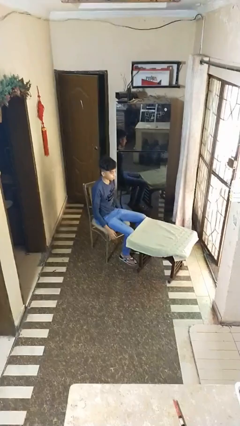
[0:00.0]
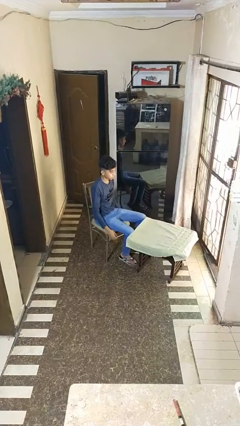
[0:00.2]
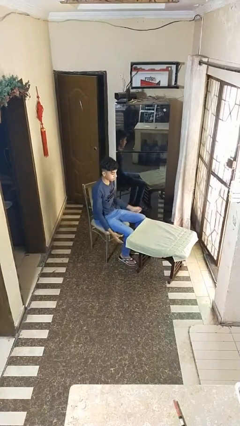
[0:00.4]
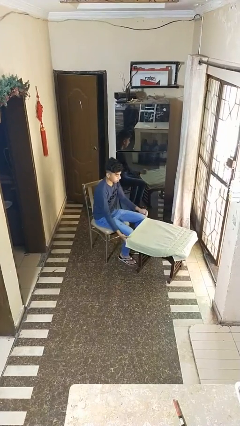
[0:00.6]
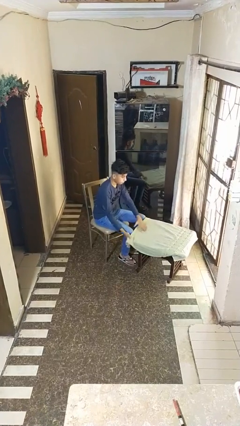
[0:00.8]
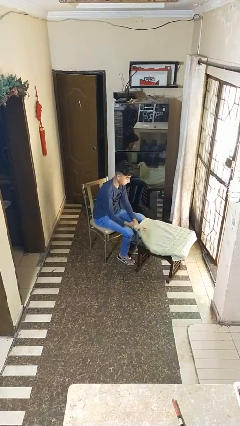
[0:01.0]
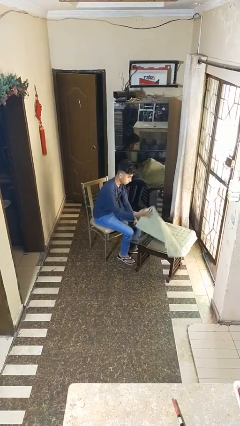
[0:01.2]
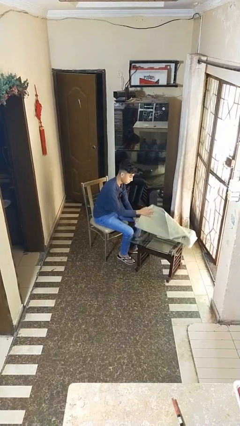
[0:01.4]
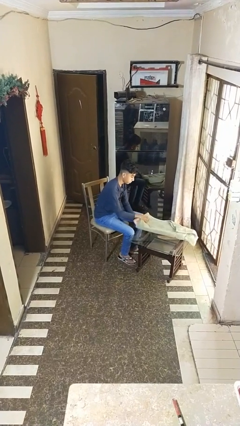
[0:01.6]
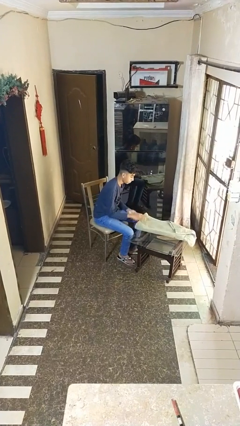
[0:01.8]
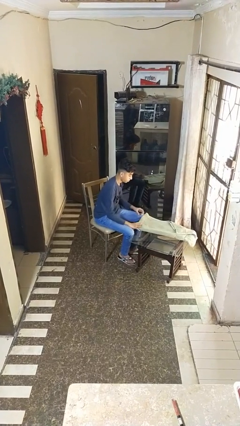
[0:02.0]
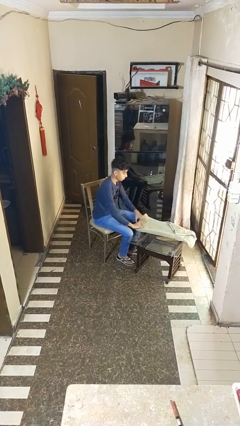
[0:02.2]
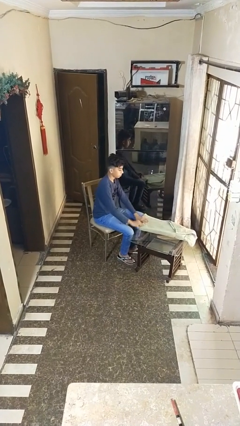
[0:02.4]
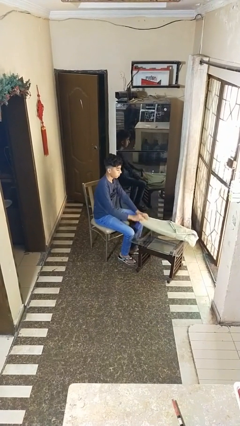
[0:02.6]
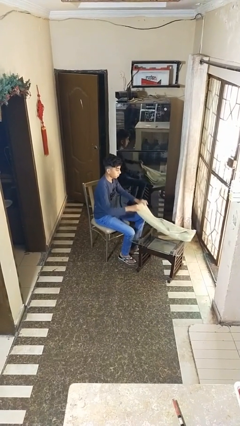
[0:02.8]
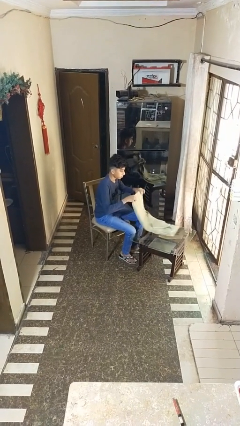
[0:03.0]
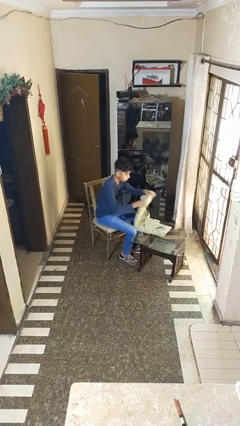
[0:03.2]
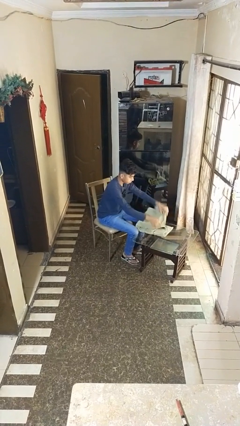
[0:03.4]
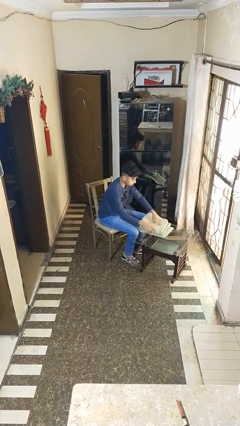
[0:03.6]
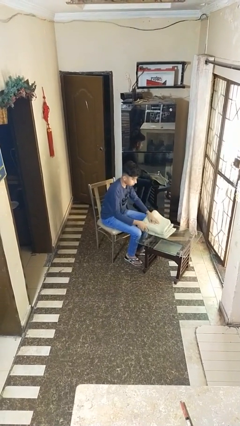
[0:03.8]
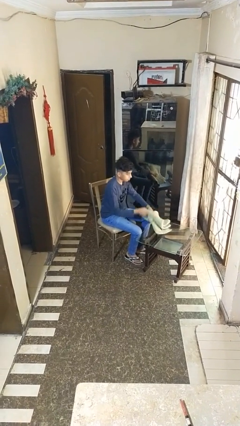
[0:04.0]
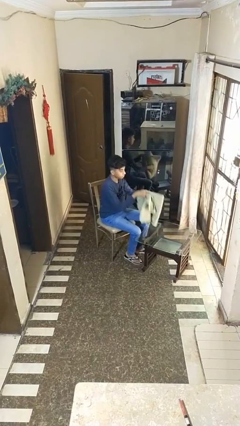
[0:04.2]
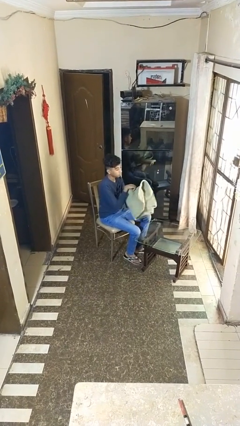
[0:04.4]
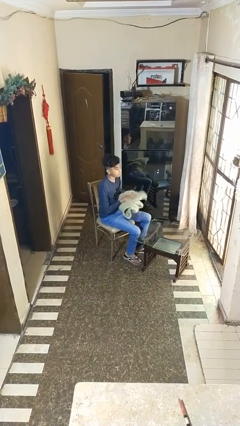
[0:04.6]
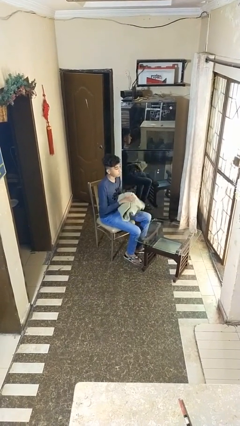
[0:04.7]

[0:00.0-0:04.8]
person folds tablecloth

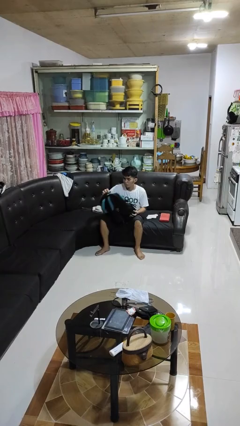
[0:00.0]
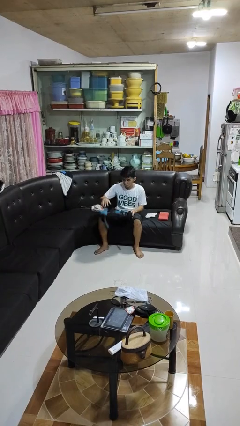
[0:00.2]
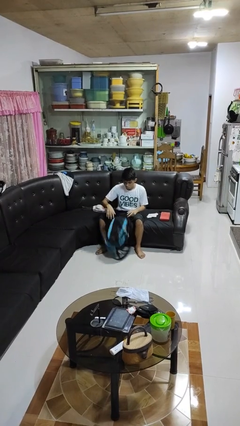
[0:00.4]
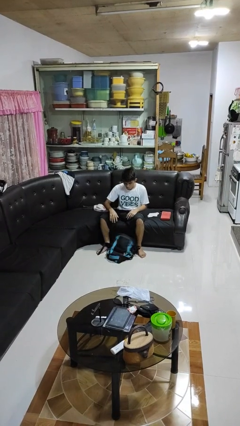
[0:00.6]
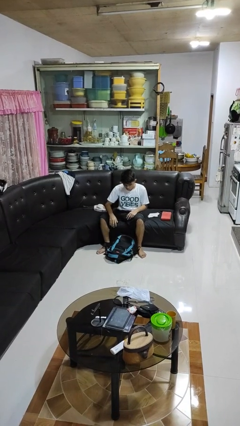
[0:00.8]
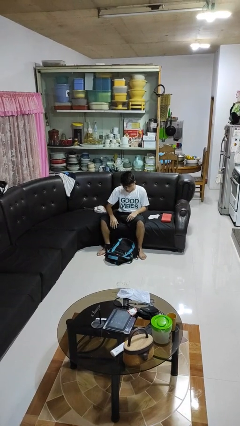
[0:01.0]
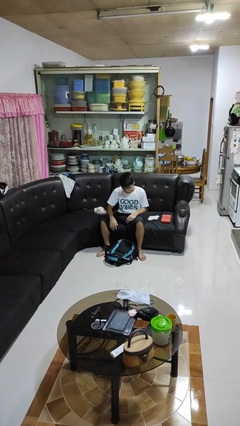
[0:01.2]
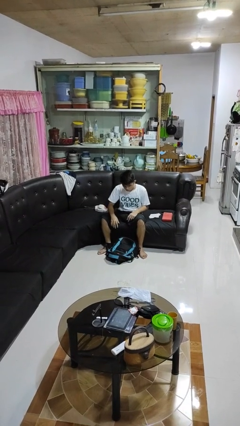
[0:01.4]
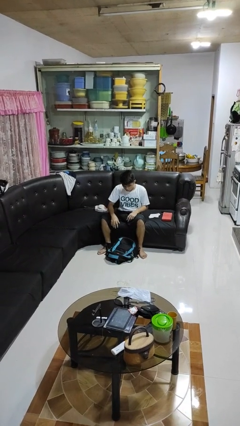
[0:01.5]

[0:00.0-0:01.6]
person drops object

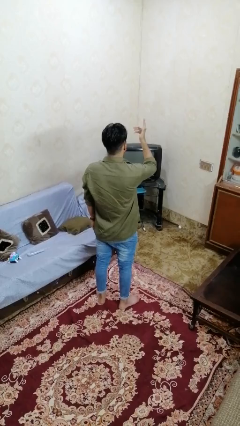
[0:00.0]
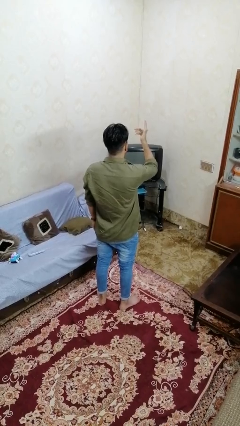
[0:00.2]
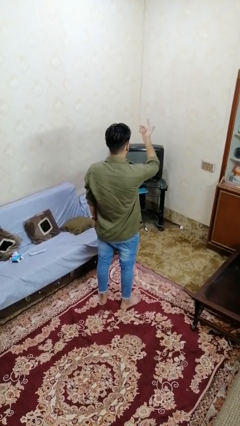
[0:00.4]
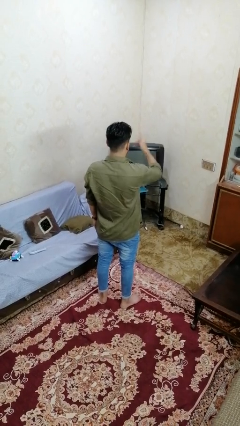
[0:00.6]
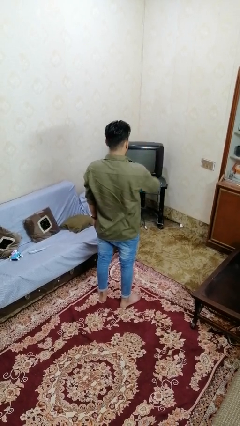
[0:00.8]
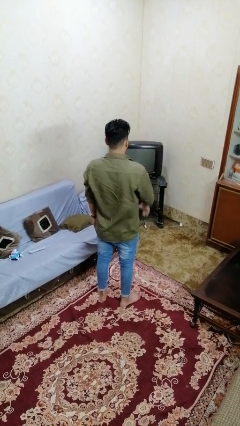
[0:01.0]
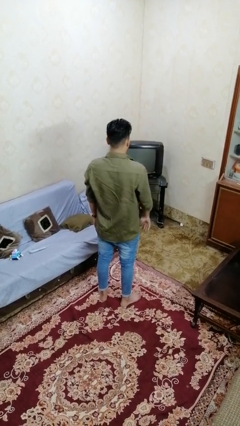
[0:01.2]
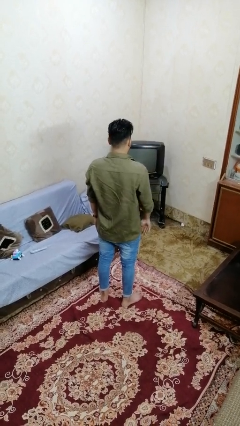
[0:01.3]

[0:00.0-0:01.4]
person gestures lower hand

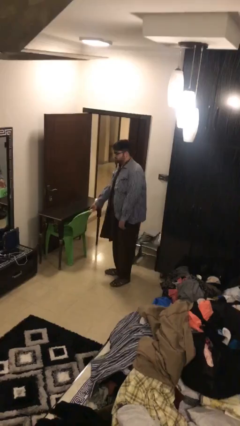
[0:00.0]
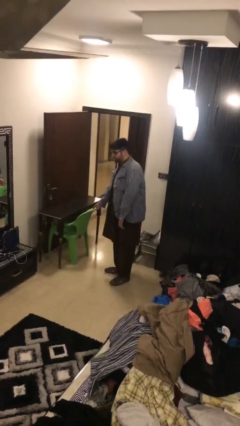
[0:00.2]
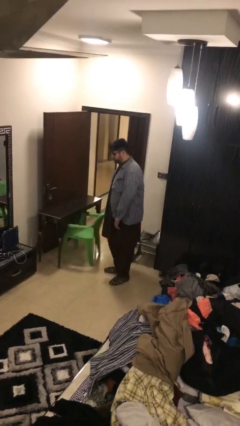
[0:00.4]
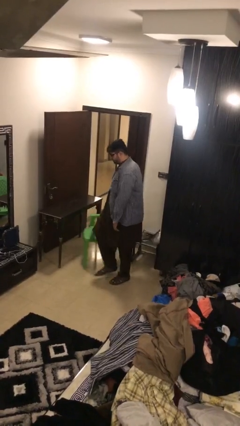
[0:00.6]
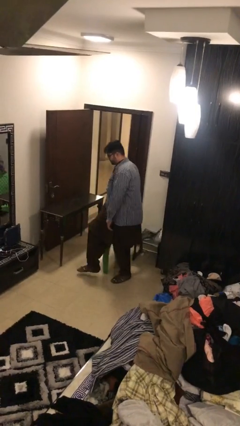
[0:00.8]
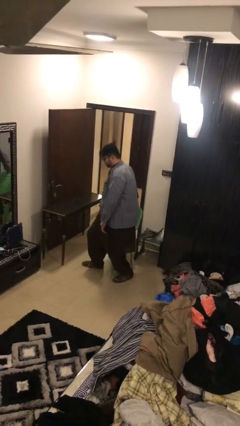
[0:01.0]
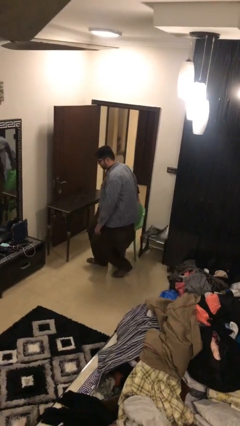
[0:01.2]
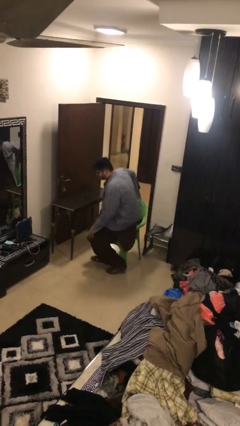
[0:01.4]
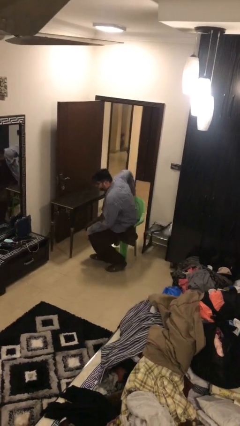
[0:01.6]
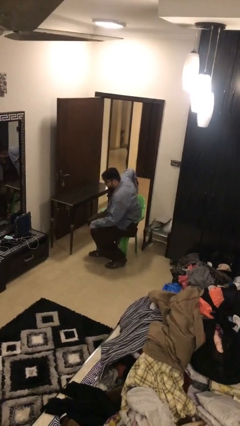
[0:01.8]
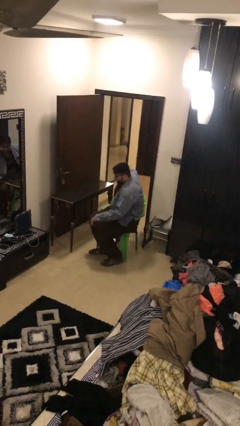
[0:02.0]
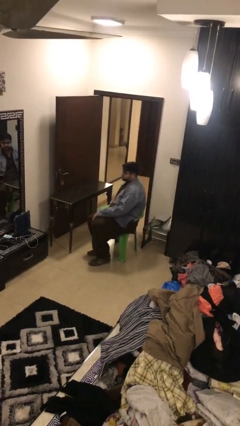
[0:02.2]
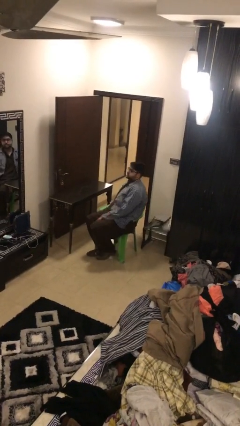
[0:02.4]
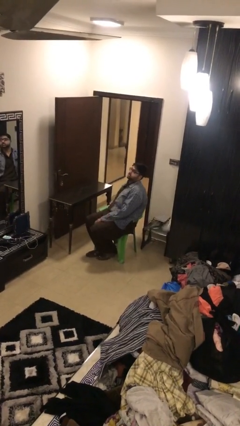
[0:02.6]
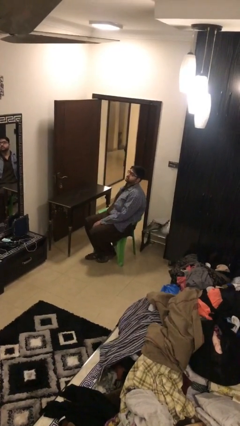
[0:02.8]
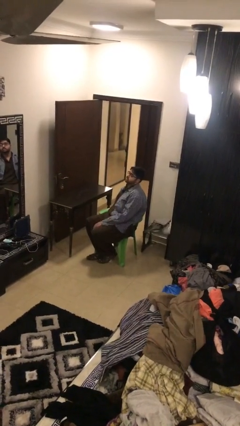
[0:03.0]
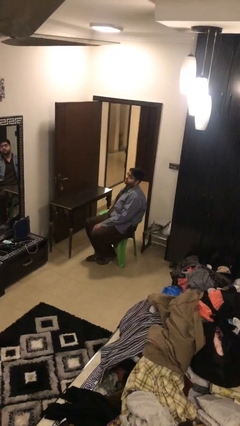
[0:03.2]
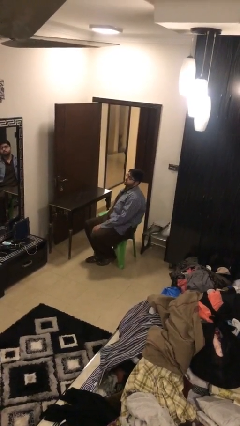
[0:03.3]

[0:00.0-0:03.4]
person sits down

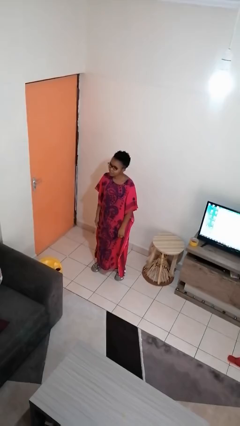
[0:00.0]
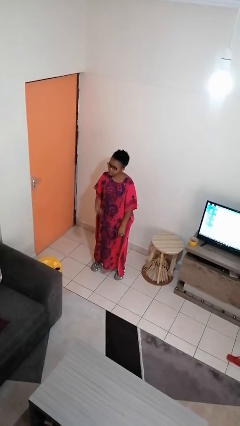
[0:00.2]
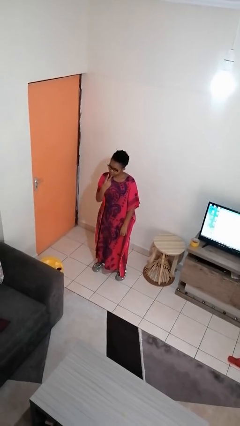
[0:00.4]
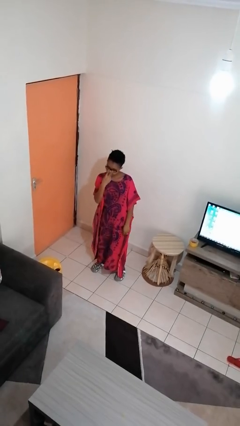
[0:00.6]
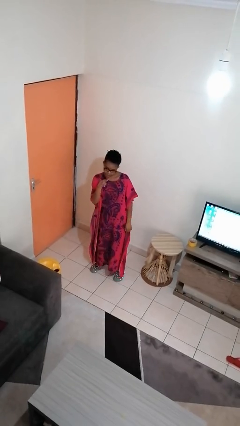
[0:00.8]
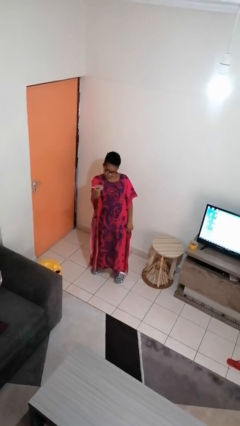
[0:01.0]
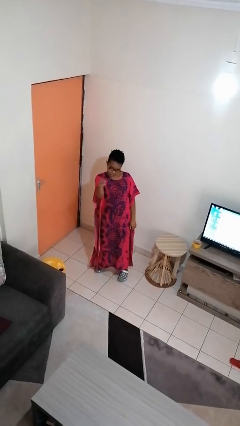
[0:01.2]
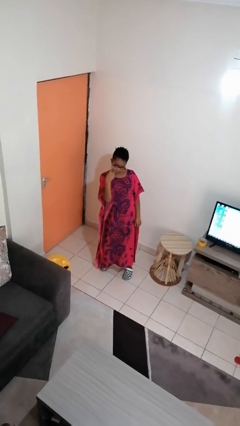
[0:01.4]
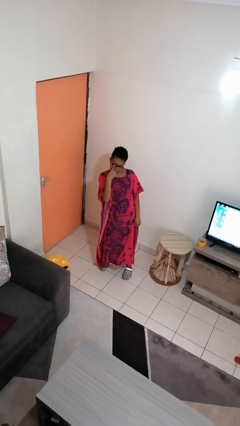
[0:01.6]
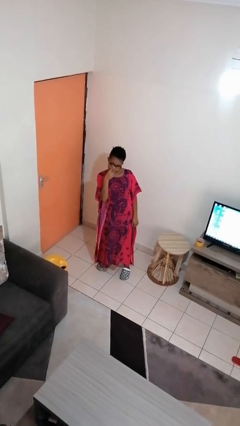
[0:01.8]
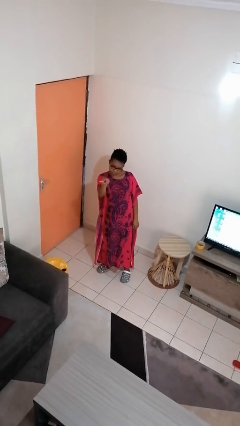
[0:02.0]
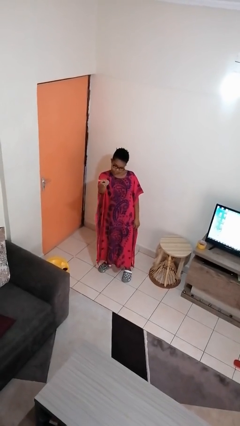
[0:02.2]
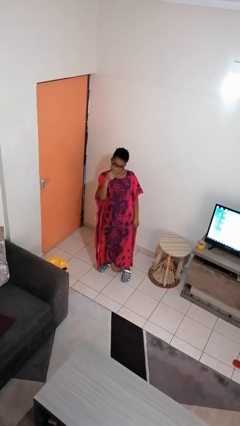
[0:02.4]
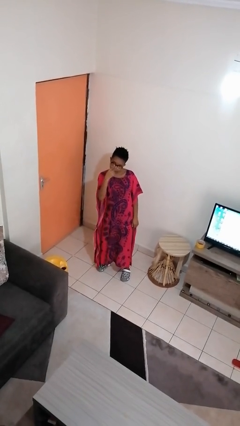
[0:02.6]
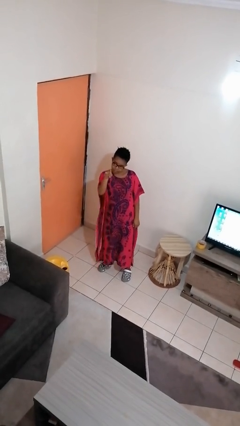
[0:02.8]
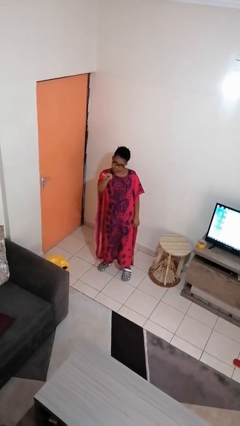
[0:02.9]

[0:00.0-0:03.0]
person gestures watch closely

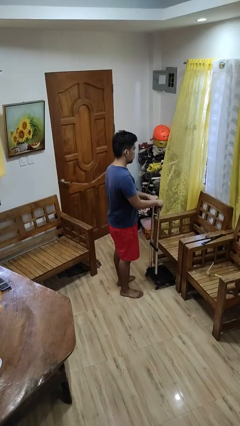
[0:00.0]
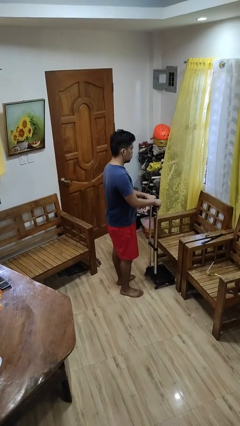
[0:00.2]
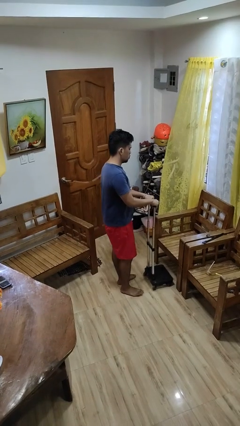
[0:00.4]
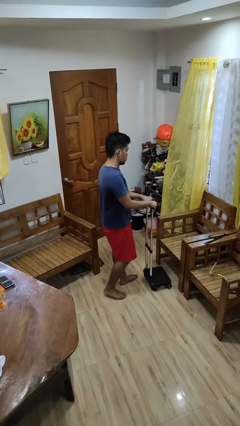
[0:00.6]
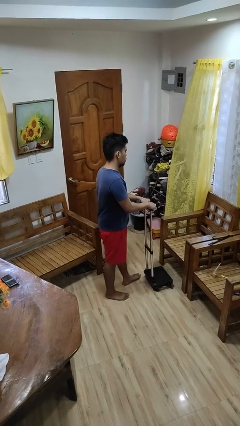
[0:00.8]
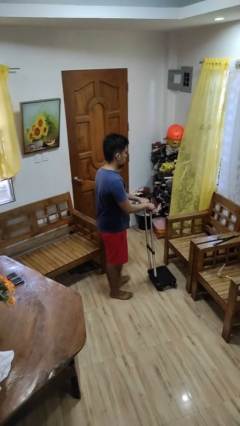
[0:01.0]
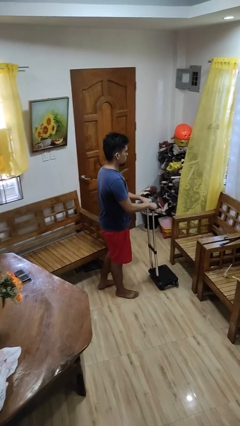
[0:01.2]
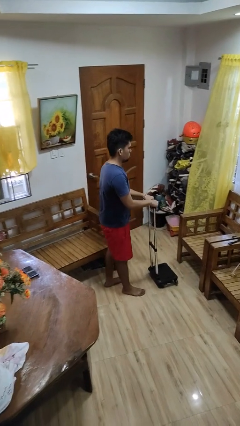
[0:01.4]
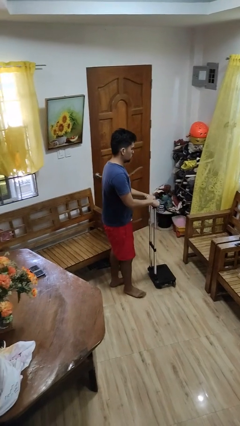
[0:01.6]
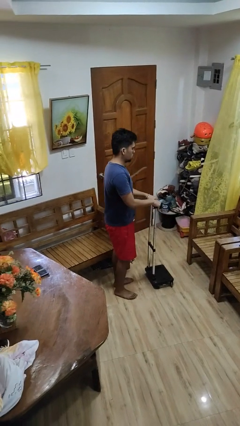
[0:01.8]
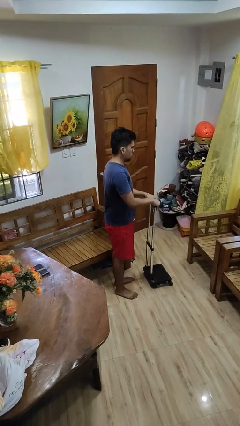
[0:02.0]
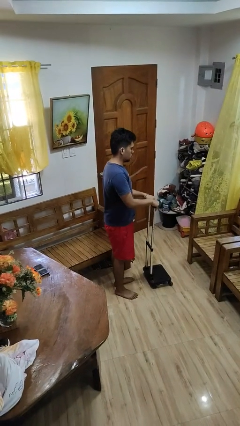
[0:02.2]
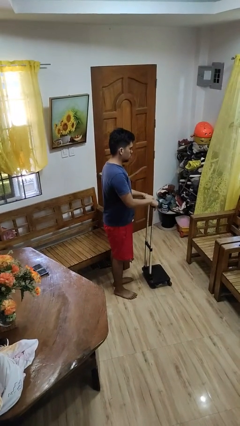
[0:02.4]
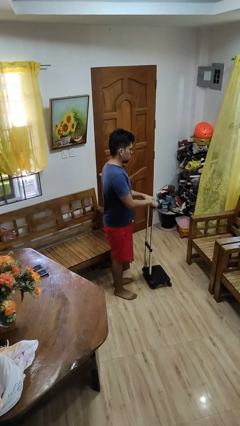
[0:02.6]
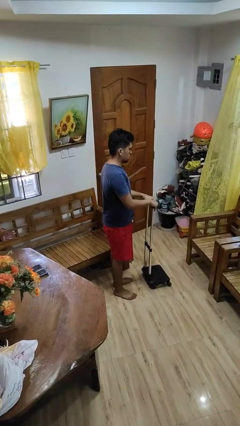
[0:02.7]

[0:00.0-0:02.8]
person pulls wheeled cart

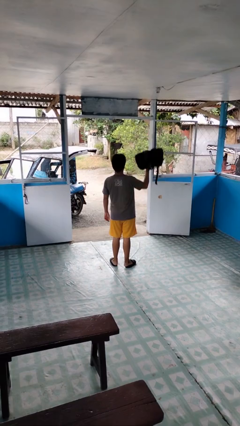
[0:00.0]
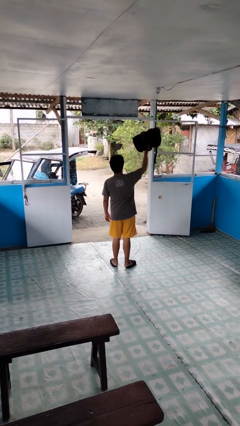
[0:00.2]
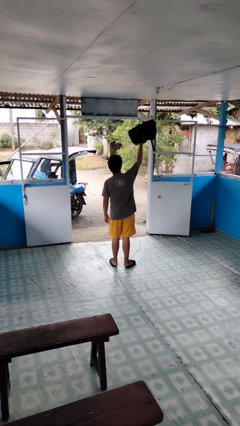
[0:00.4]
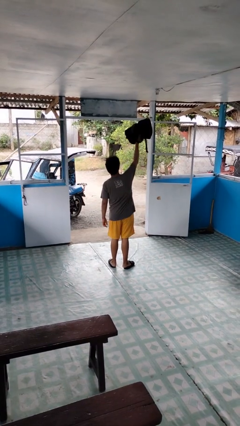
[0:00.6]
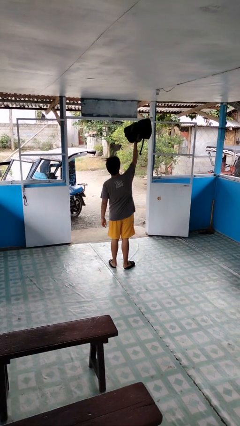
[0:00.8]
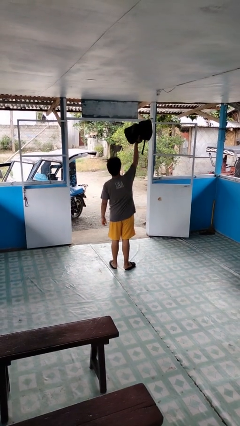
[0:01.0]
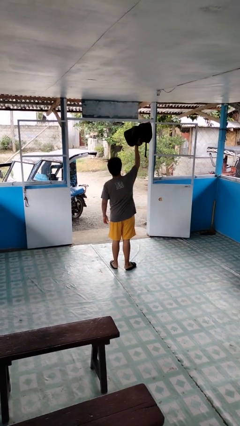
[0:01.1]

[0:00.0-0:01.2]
person holds object above head
